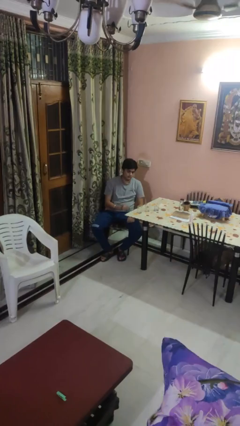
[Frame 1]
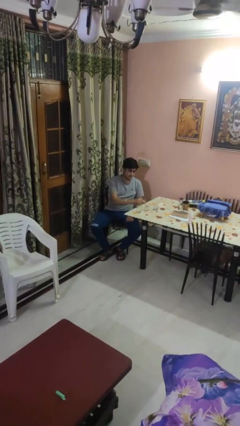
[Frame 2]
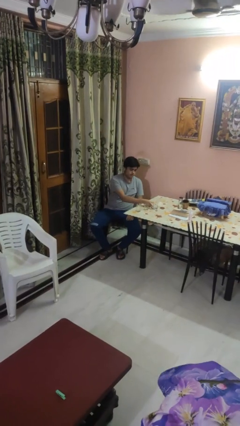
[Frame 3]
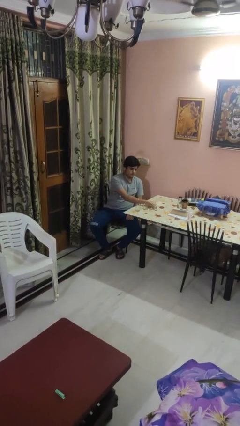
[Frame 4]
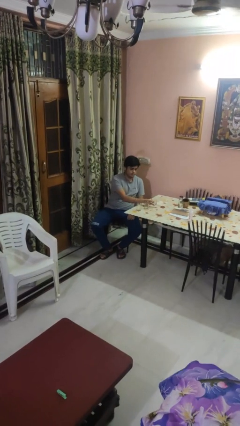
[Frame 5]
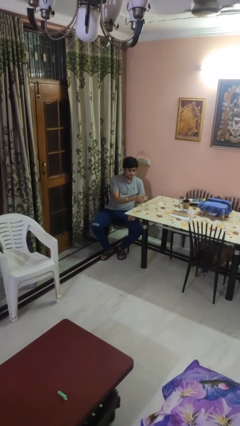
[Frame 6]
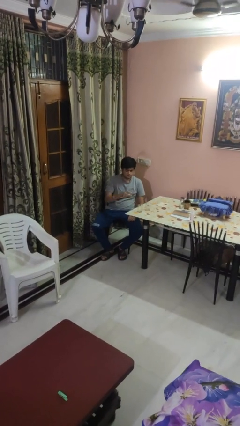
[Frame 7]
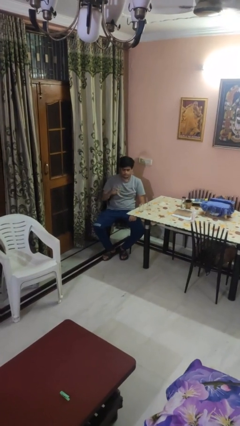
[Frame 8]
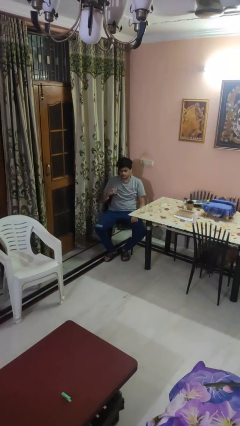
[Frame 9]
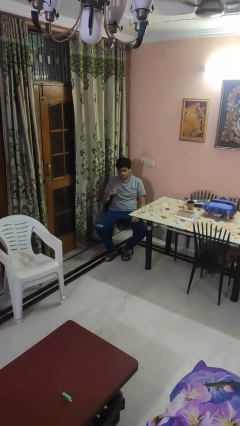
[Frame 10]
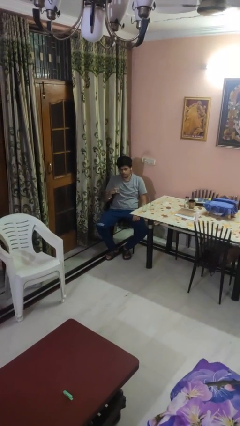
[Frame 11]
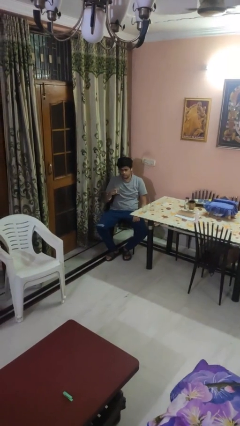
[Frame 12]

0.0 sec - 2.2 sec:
person picks up object from table

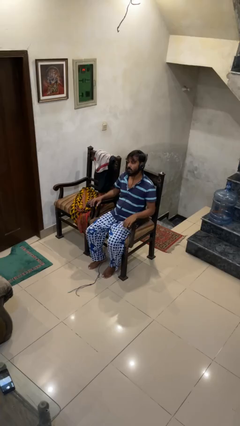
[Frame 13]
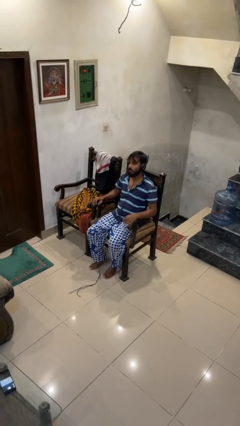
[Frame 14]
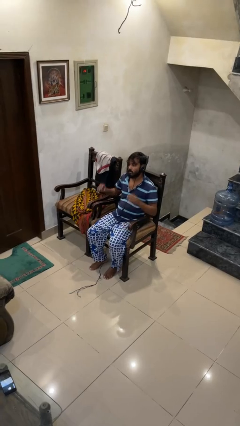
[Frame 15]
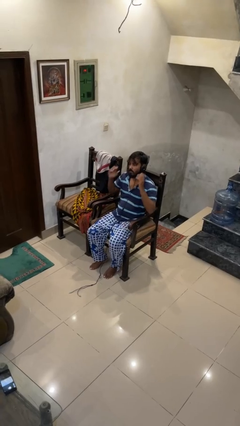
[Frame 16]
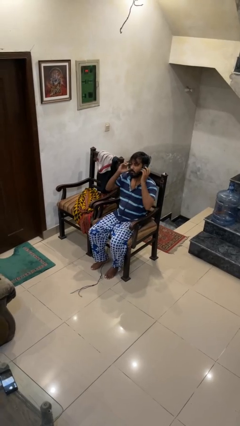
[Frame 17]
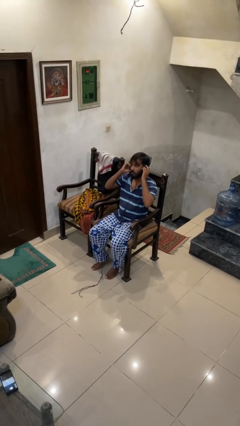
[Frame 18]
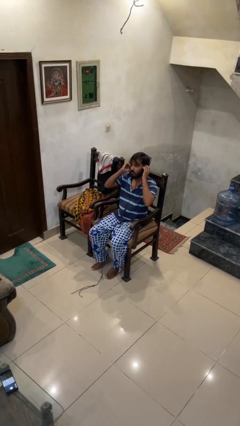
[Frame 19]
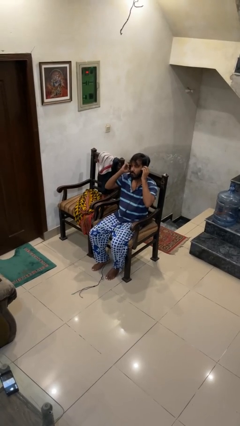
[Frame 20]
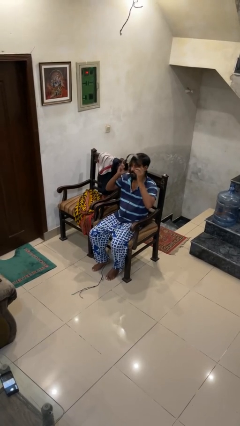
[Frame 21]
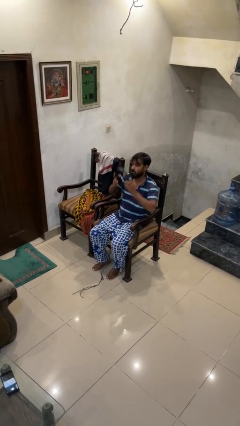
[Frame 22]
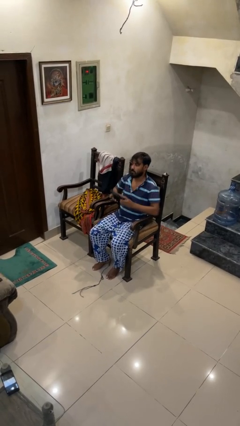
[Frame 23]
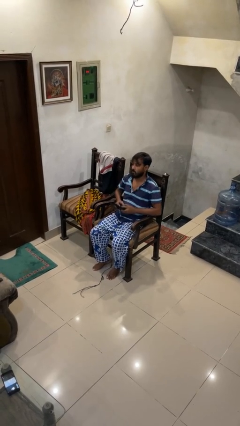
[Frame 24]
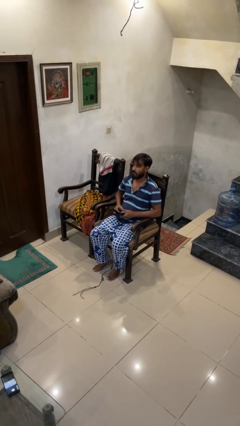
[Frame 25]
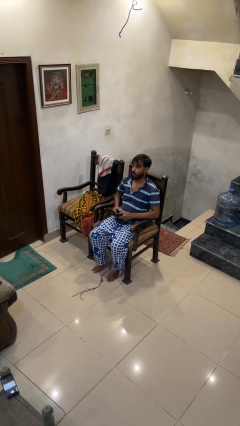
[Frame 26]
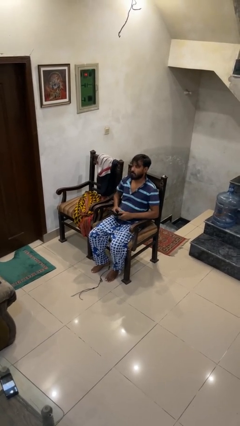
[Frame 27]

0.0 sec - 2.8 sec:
person takes off headphones

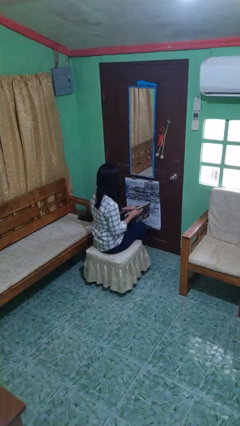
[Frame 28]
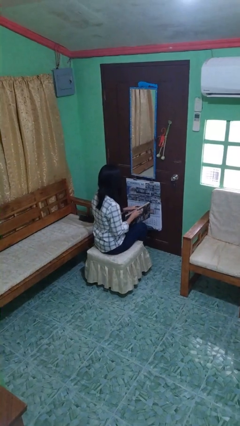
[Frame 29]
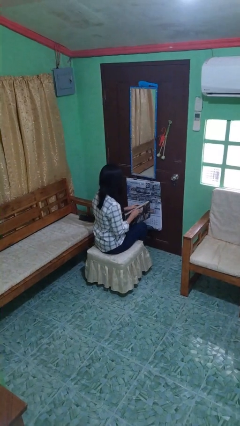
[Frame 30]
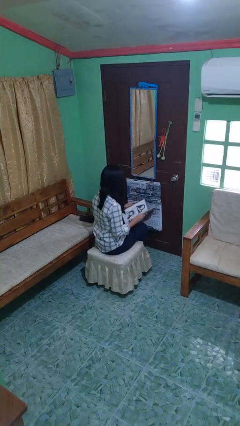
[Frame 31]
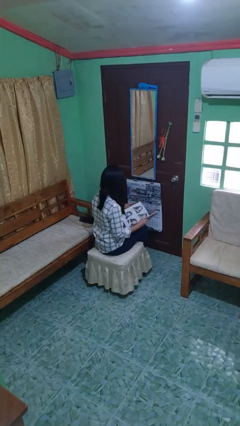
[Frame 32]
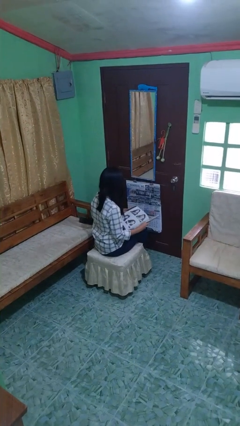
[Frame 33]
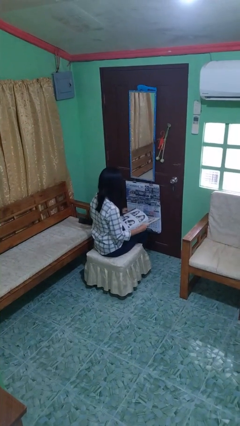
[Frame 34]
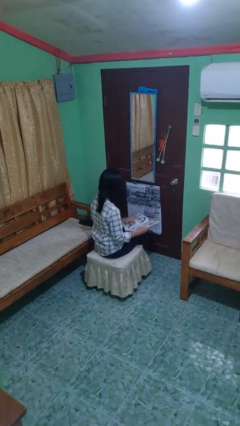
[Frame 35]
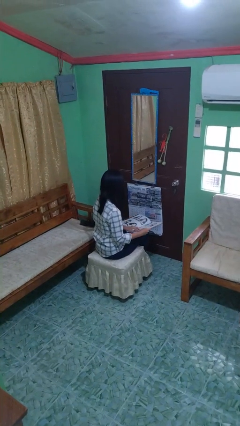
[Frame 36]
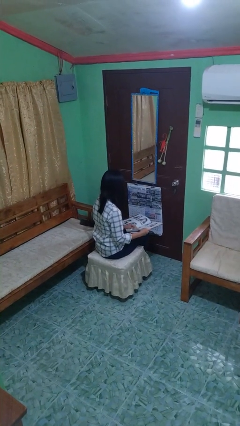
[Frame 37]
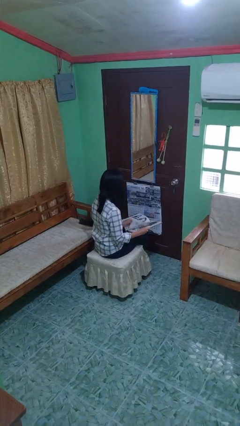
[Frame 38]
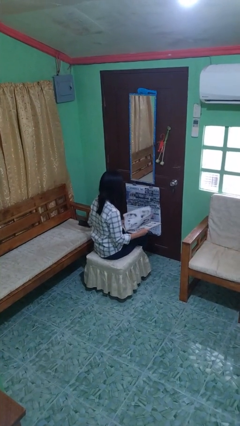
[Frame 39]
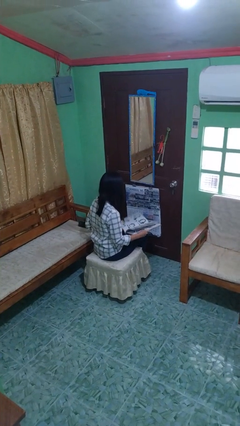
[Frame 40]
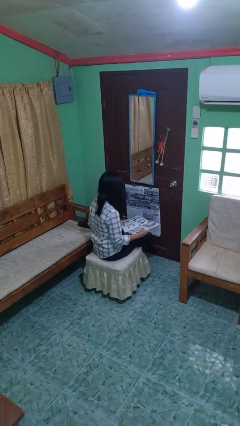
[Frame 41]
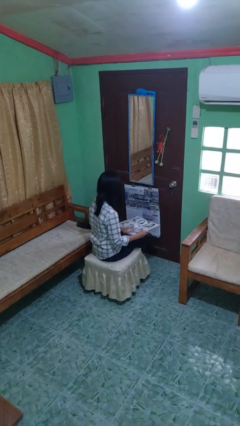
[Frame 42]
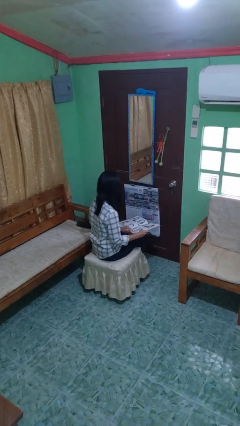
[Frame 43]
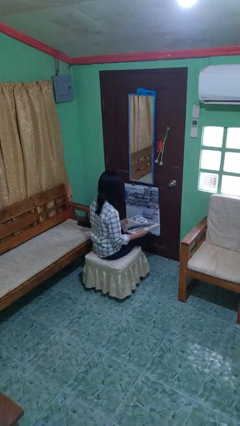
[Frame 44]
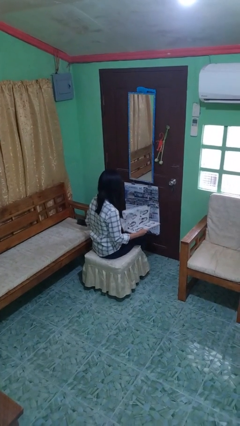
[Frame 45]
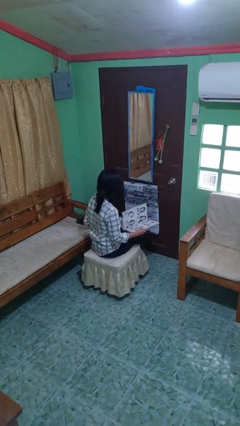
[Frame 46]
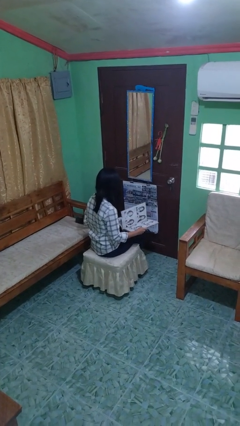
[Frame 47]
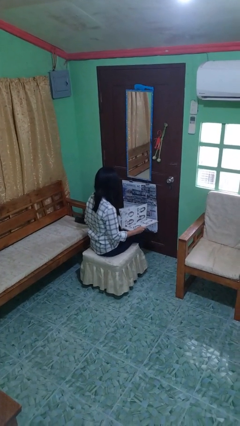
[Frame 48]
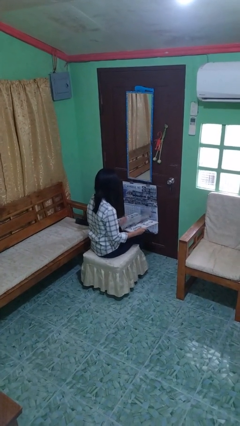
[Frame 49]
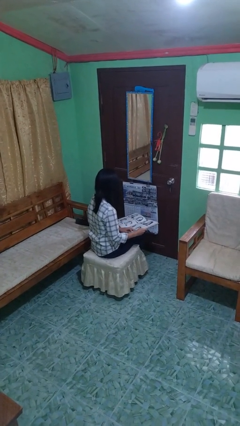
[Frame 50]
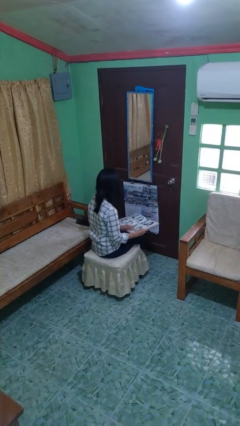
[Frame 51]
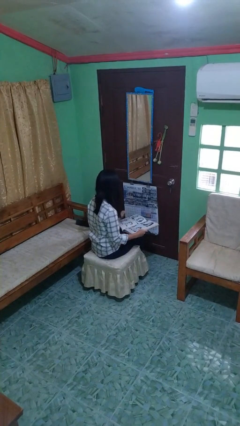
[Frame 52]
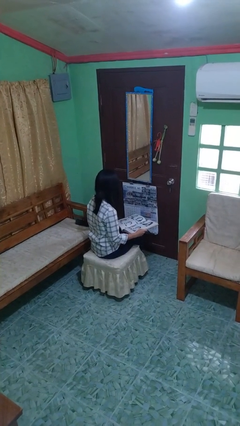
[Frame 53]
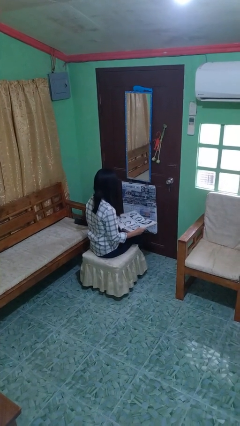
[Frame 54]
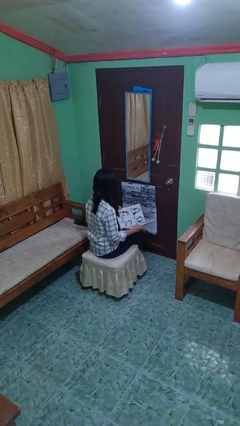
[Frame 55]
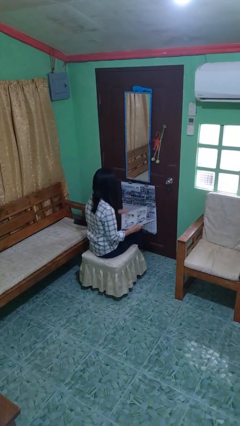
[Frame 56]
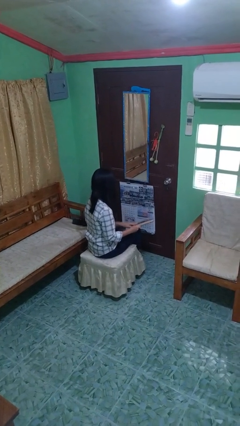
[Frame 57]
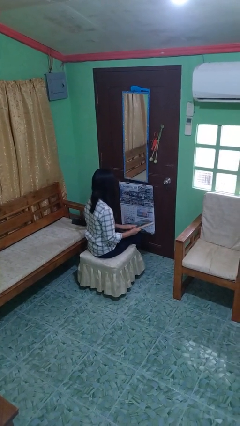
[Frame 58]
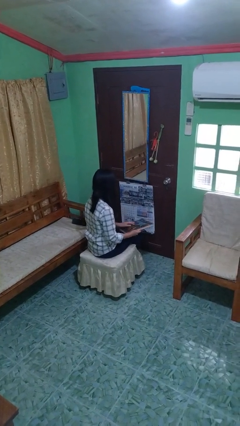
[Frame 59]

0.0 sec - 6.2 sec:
person reads book

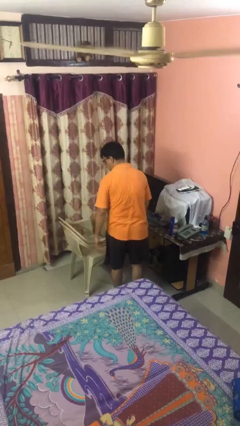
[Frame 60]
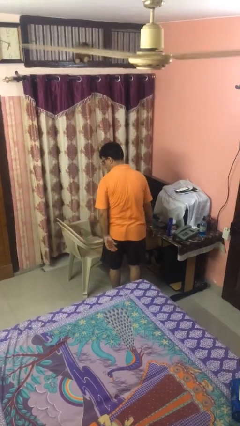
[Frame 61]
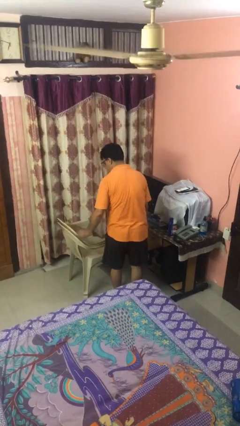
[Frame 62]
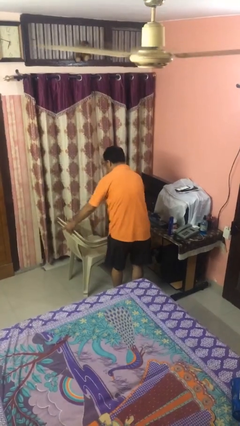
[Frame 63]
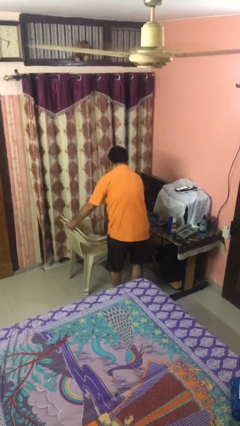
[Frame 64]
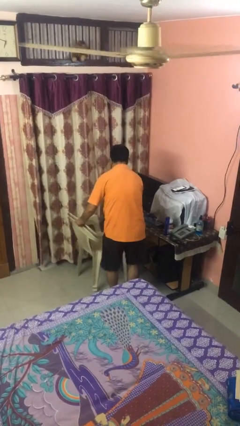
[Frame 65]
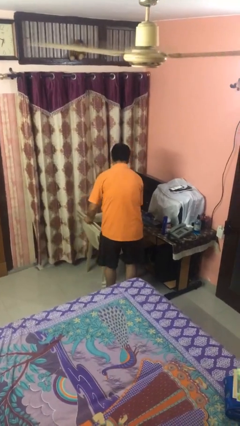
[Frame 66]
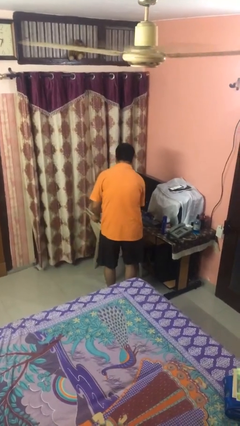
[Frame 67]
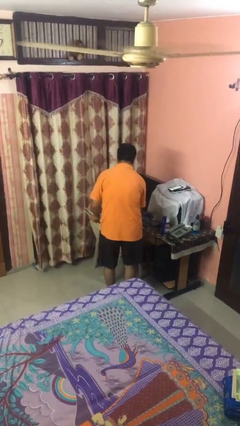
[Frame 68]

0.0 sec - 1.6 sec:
person pushes in chair

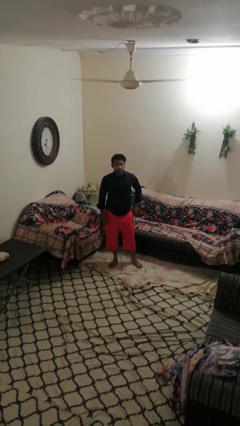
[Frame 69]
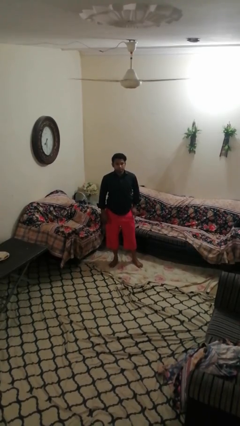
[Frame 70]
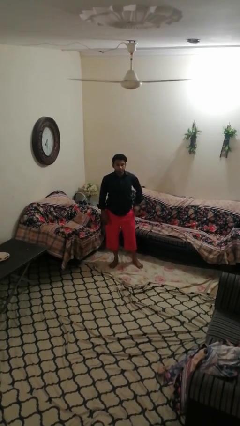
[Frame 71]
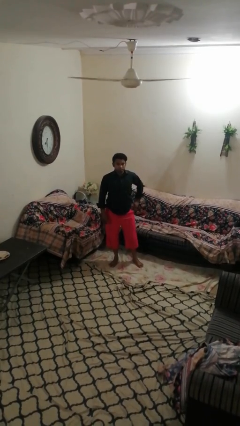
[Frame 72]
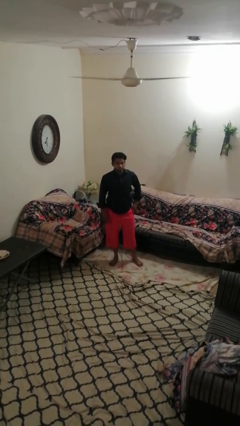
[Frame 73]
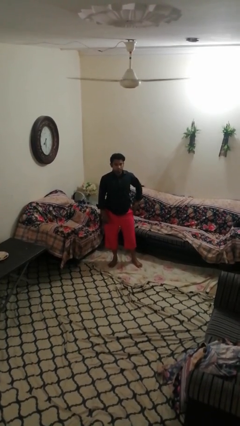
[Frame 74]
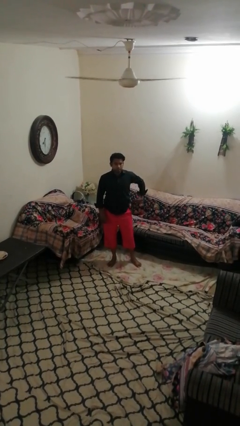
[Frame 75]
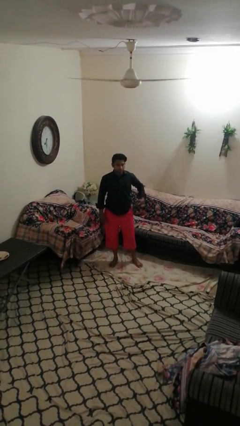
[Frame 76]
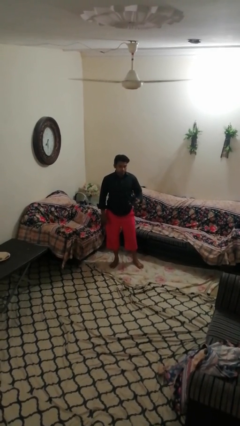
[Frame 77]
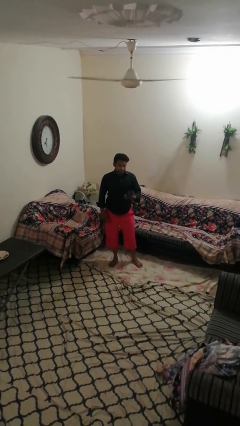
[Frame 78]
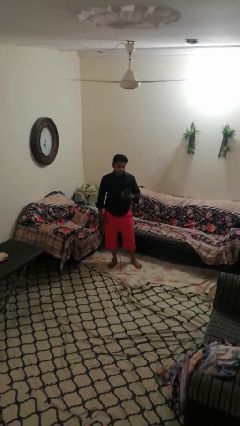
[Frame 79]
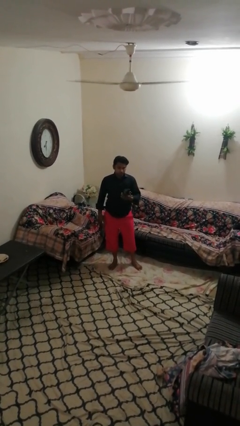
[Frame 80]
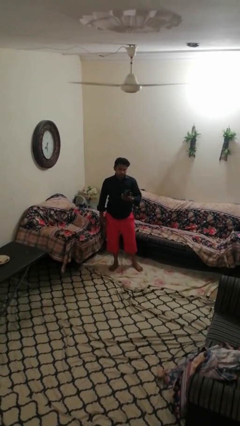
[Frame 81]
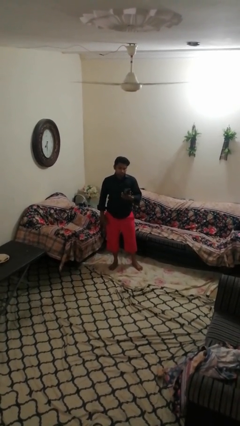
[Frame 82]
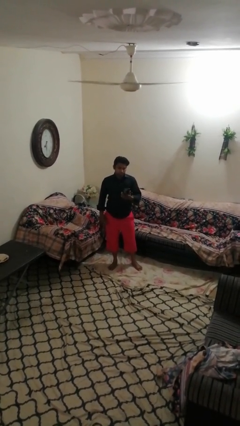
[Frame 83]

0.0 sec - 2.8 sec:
person takes phone from pocket

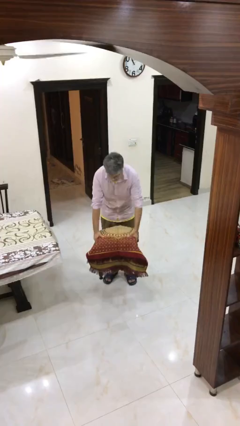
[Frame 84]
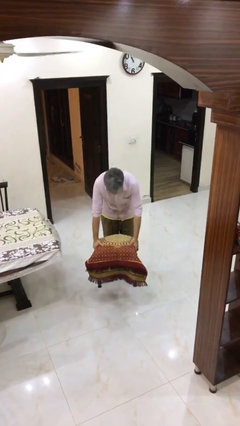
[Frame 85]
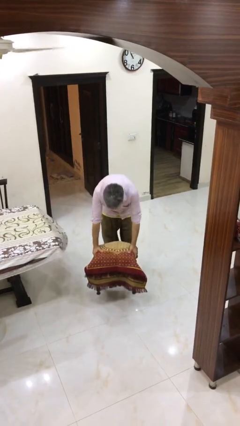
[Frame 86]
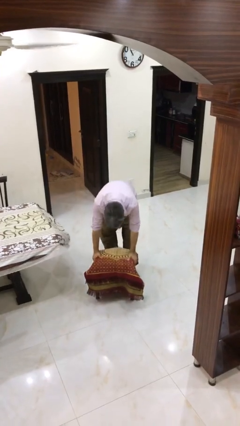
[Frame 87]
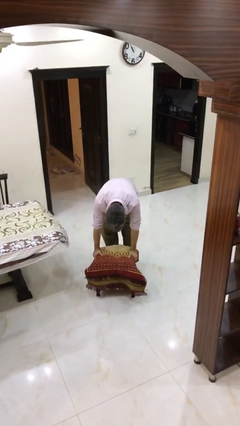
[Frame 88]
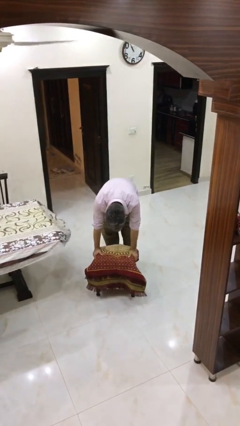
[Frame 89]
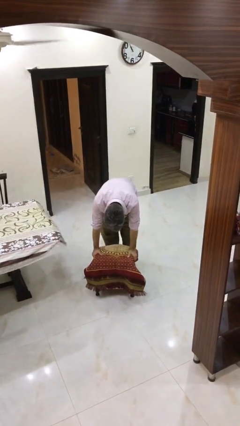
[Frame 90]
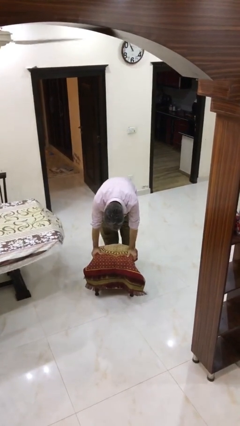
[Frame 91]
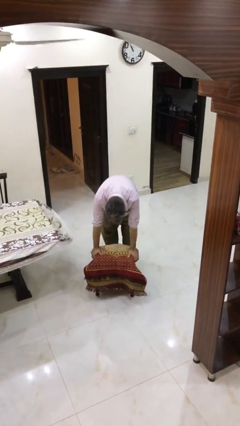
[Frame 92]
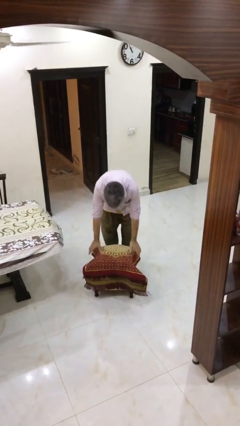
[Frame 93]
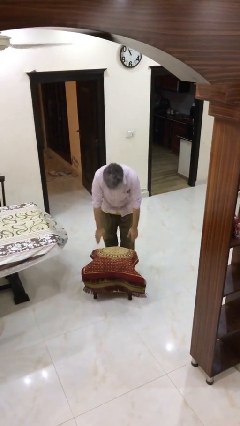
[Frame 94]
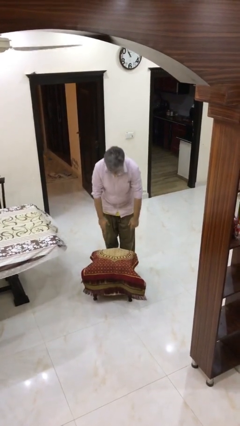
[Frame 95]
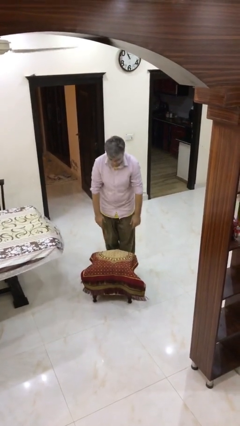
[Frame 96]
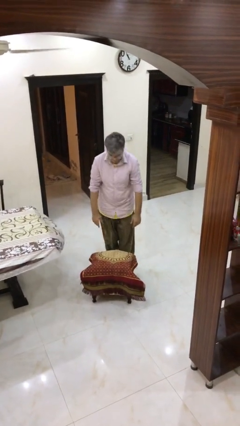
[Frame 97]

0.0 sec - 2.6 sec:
person puts down object on floor
